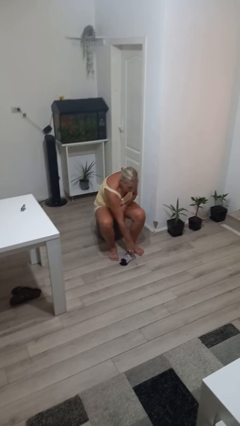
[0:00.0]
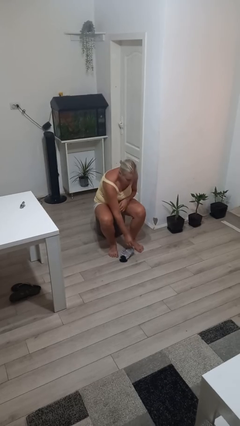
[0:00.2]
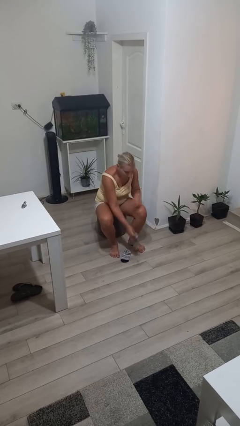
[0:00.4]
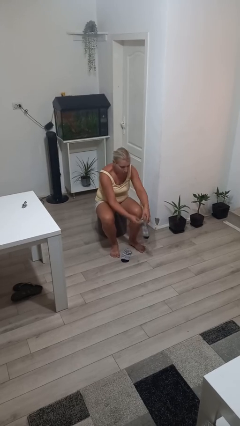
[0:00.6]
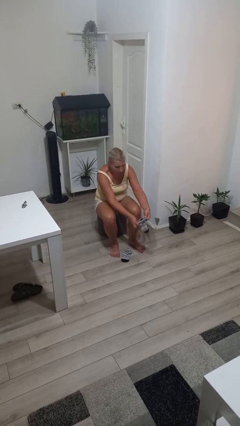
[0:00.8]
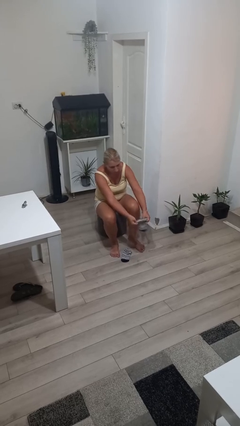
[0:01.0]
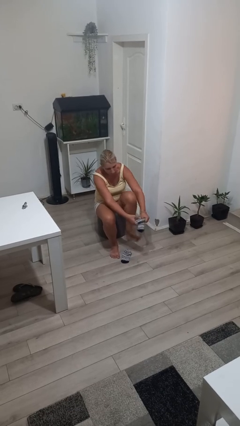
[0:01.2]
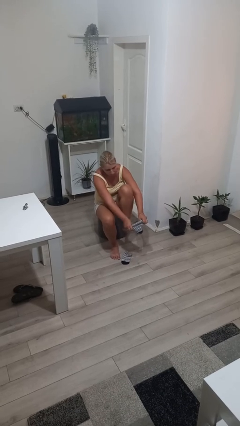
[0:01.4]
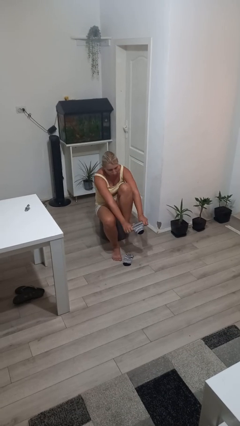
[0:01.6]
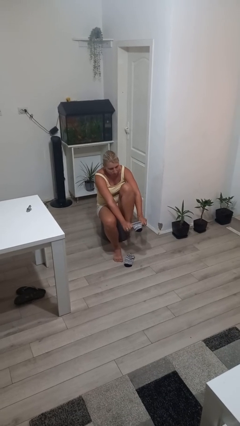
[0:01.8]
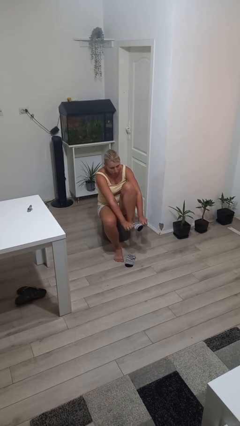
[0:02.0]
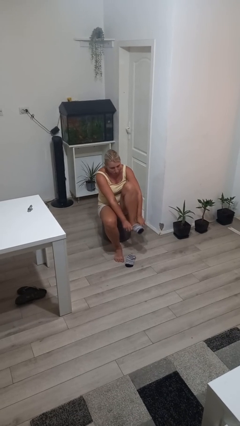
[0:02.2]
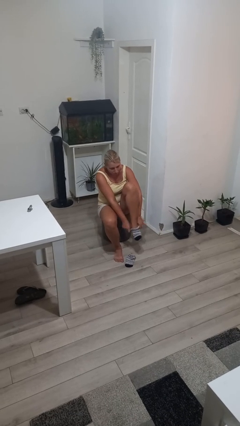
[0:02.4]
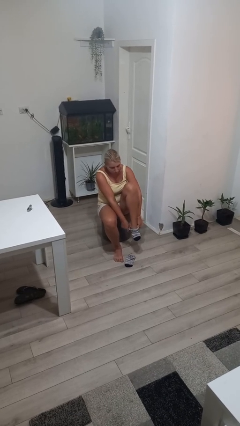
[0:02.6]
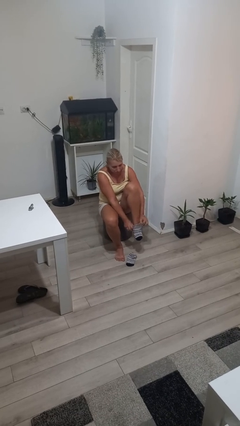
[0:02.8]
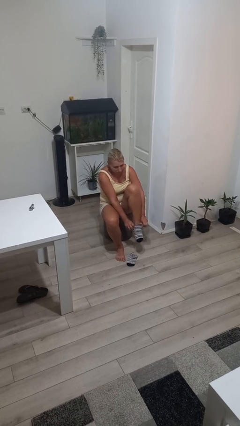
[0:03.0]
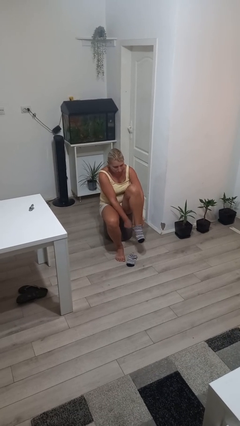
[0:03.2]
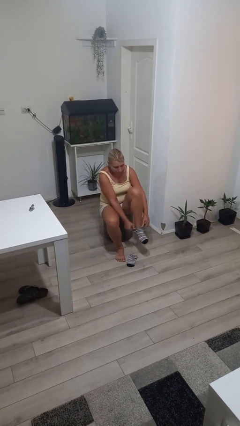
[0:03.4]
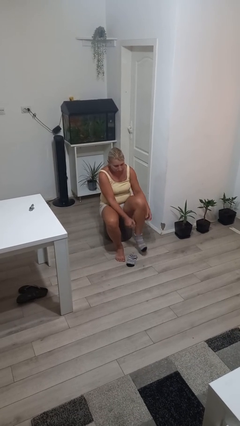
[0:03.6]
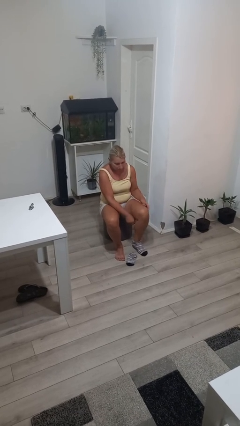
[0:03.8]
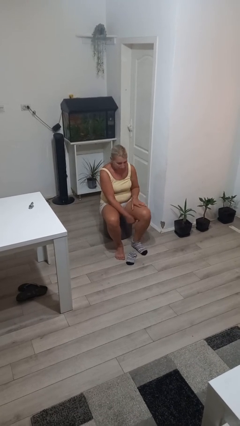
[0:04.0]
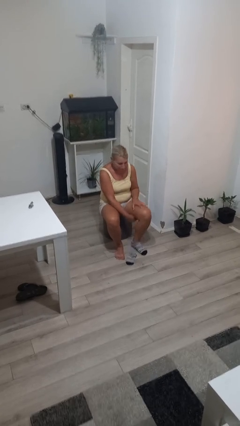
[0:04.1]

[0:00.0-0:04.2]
person puts on socks

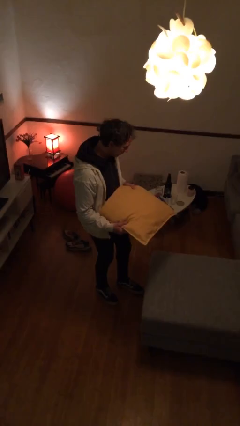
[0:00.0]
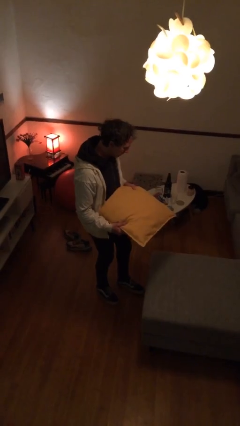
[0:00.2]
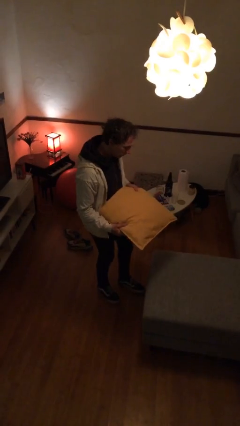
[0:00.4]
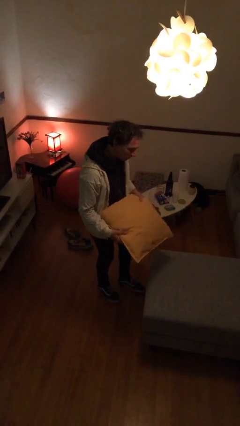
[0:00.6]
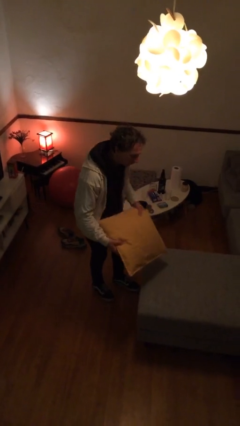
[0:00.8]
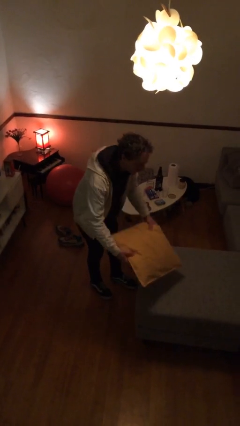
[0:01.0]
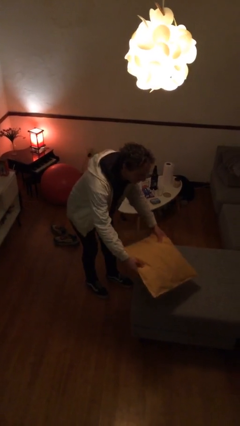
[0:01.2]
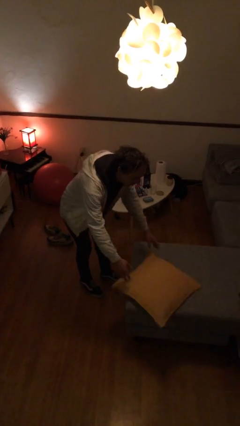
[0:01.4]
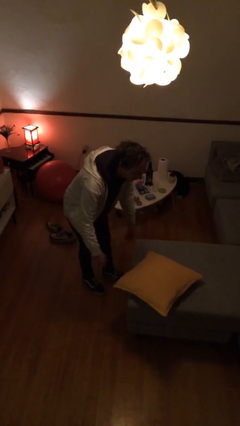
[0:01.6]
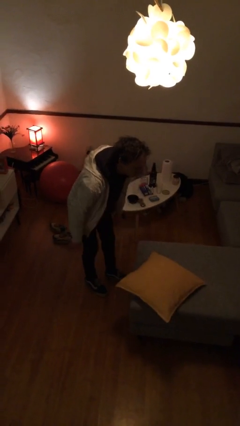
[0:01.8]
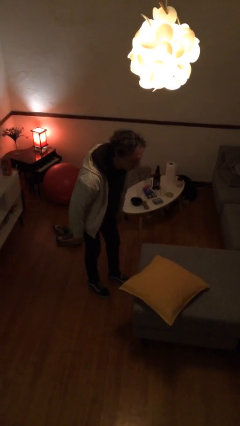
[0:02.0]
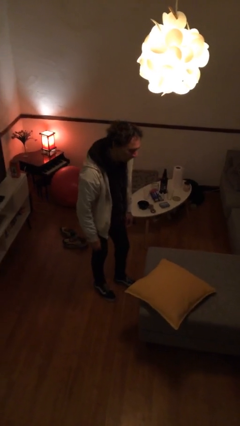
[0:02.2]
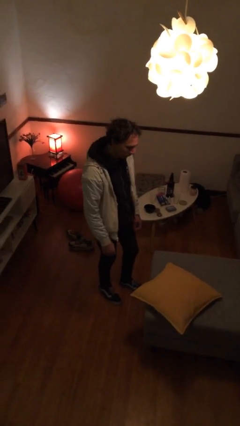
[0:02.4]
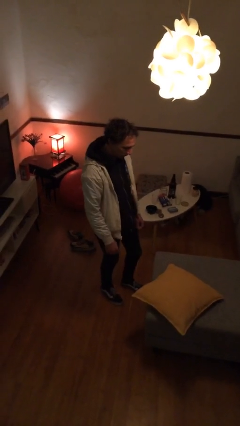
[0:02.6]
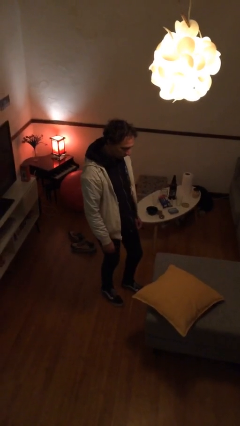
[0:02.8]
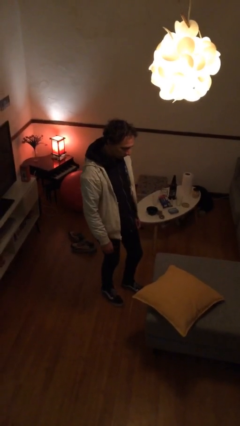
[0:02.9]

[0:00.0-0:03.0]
person puts down object on couch

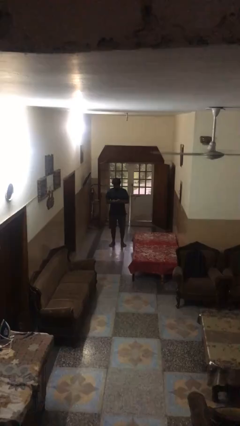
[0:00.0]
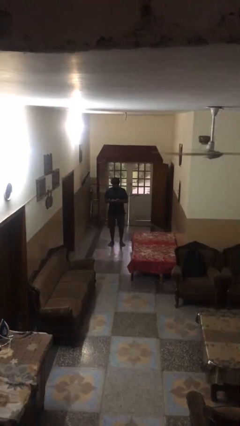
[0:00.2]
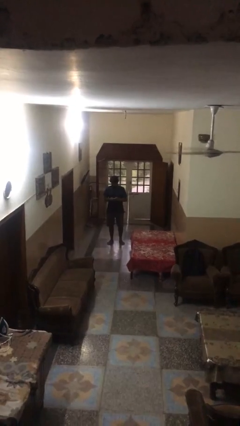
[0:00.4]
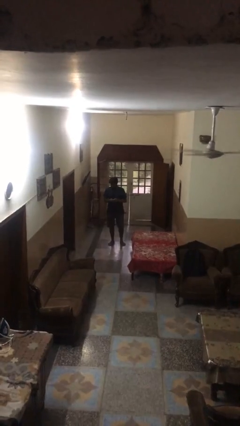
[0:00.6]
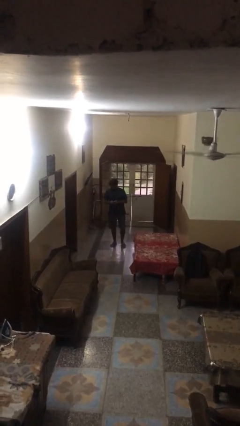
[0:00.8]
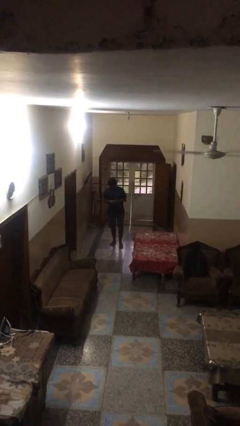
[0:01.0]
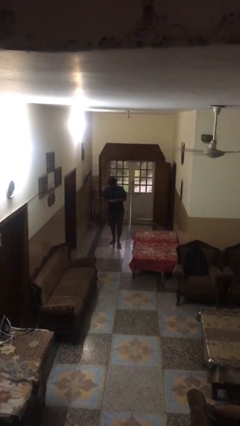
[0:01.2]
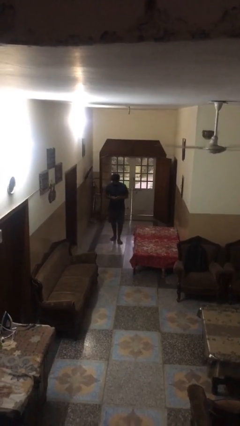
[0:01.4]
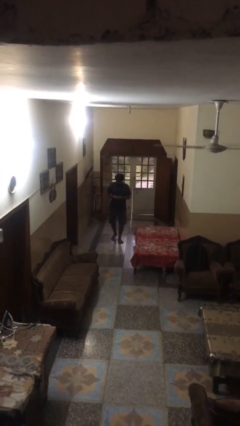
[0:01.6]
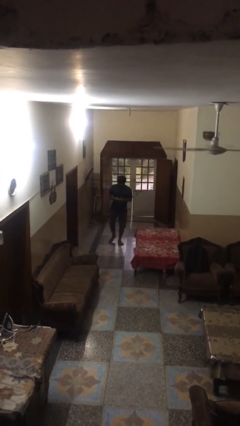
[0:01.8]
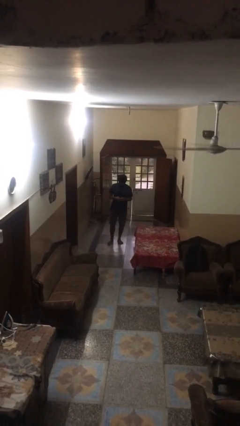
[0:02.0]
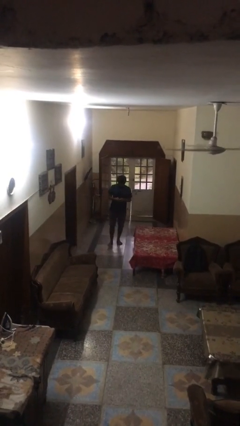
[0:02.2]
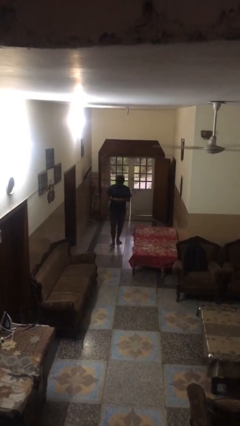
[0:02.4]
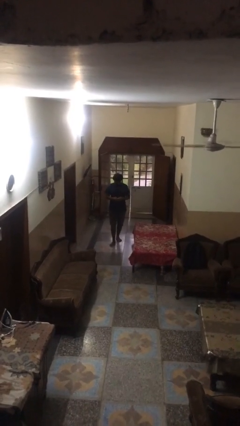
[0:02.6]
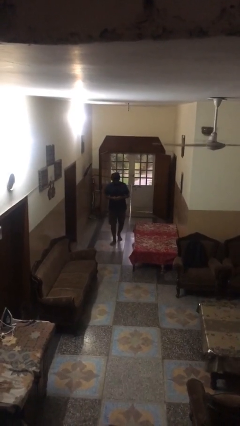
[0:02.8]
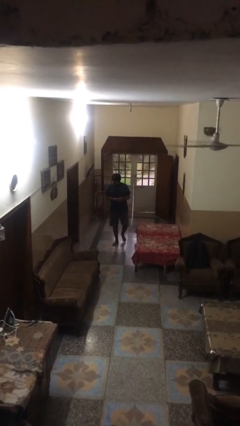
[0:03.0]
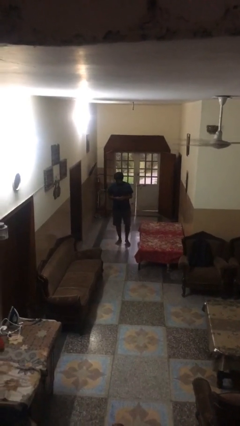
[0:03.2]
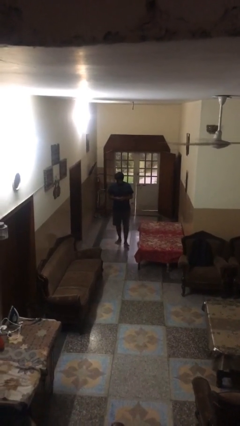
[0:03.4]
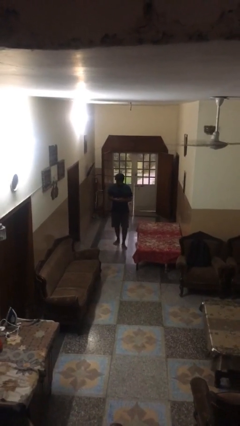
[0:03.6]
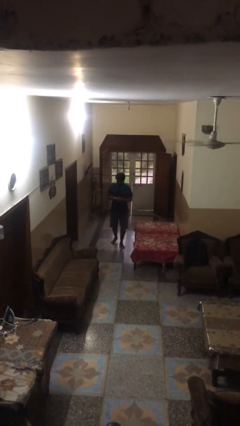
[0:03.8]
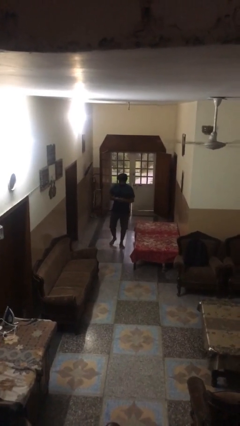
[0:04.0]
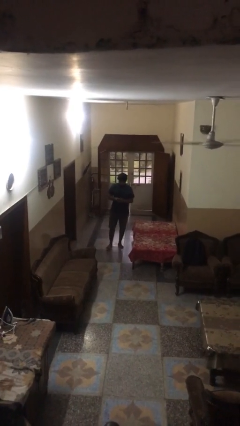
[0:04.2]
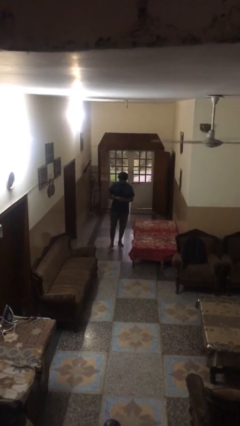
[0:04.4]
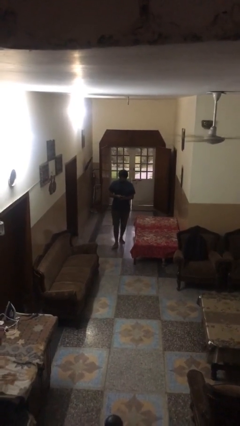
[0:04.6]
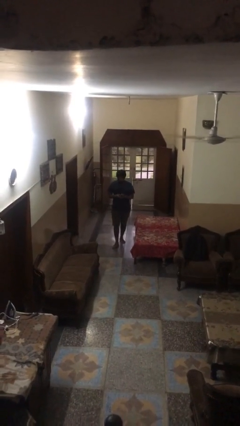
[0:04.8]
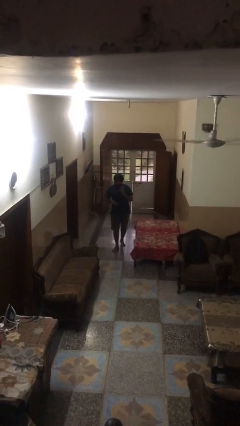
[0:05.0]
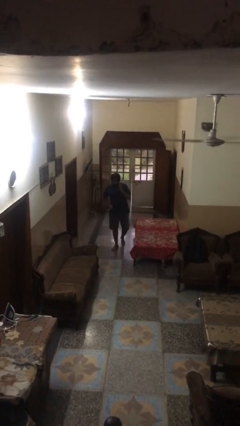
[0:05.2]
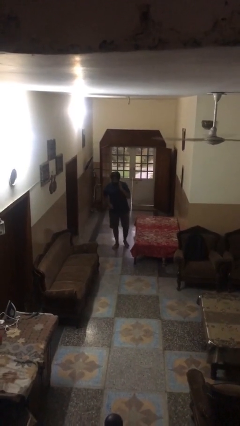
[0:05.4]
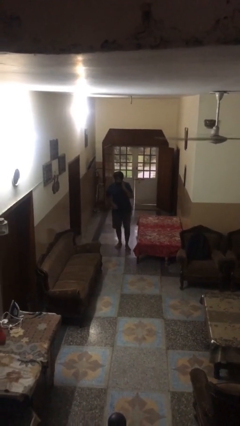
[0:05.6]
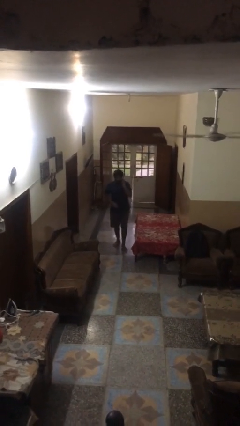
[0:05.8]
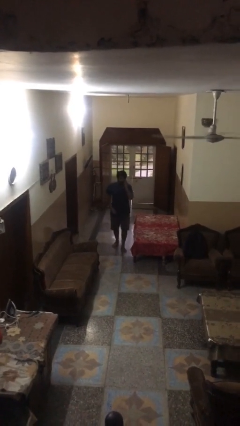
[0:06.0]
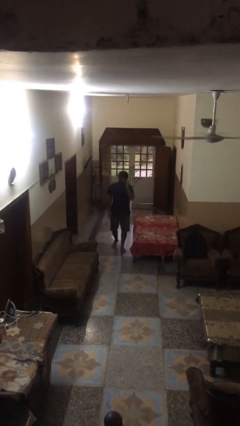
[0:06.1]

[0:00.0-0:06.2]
person texts on phone

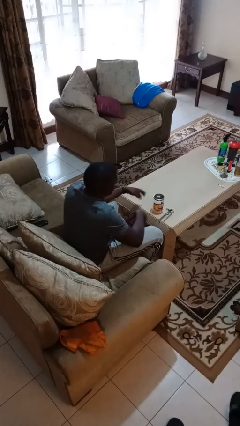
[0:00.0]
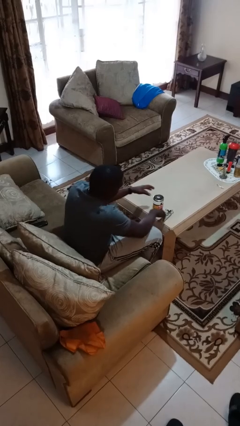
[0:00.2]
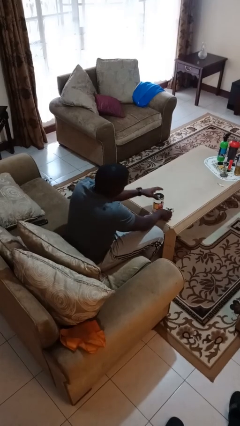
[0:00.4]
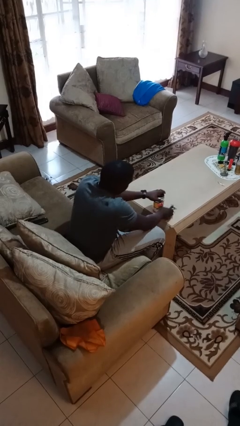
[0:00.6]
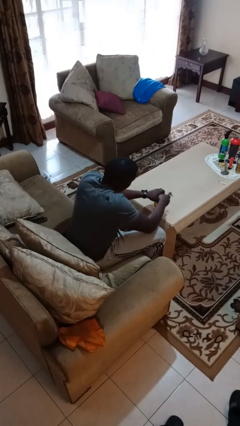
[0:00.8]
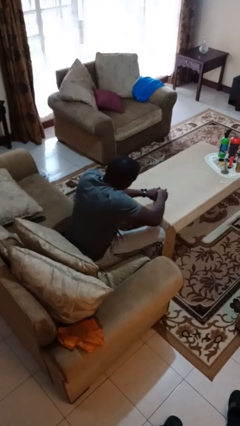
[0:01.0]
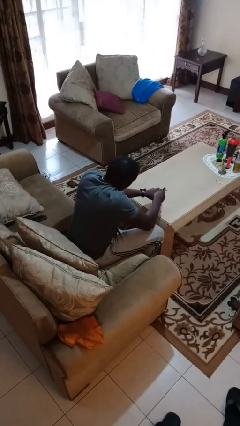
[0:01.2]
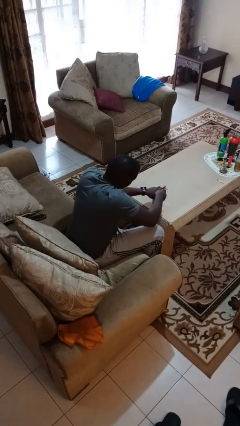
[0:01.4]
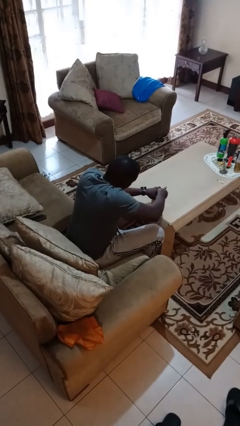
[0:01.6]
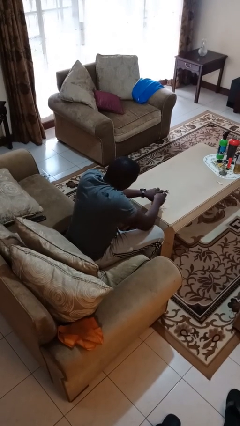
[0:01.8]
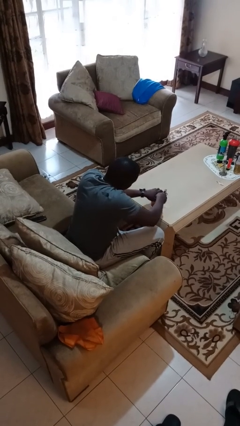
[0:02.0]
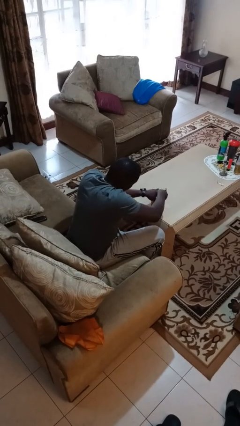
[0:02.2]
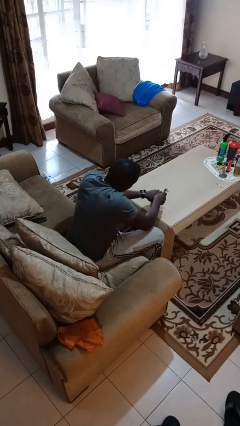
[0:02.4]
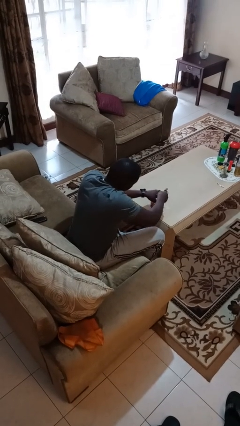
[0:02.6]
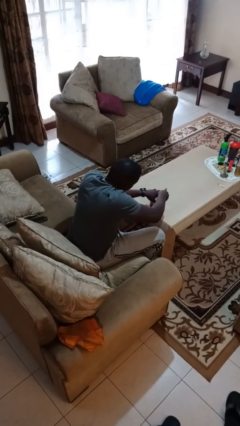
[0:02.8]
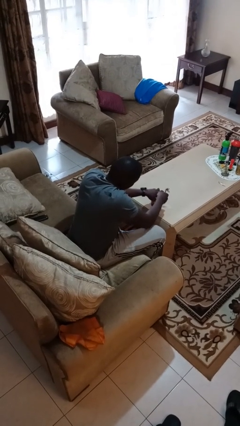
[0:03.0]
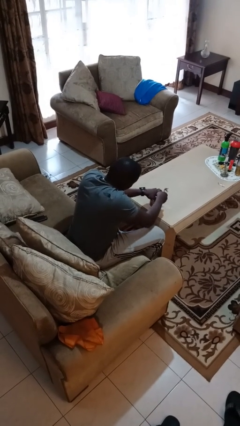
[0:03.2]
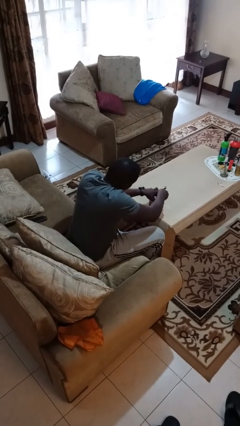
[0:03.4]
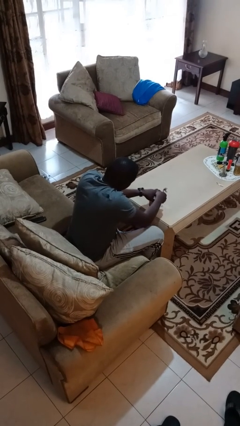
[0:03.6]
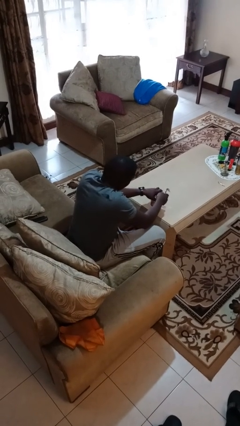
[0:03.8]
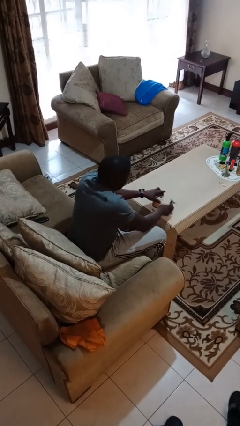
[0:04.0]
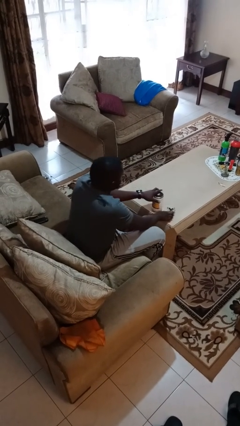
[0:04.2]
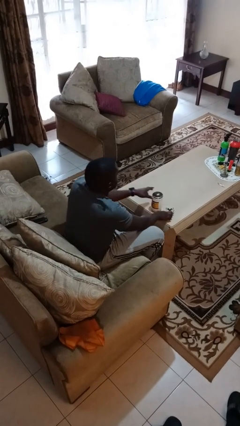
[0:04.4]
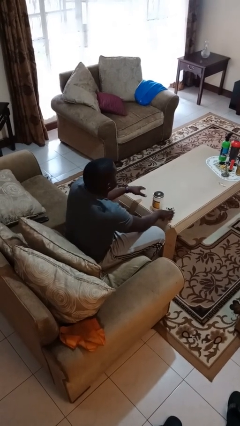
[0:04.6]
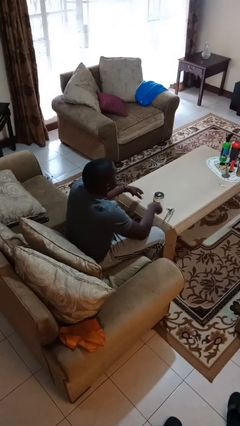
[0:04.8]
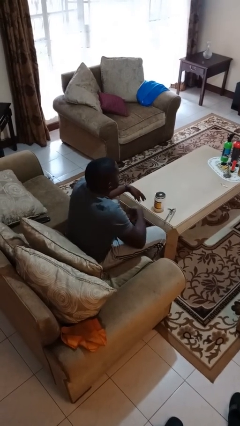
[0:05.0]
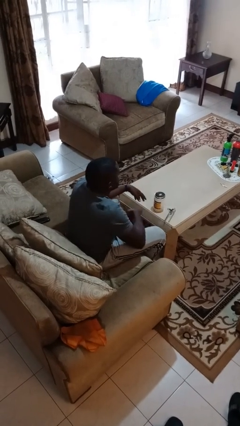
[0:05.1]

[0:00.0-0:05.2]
person opens can with can opener
